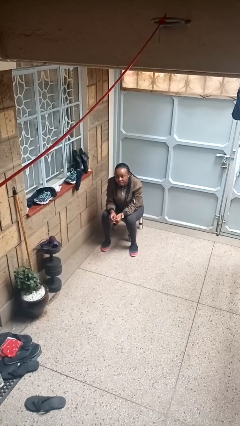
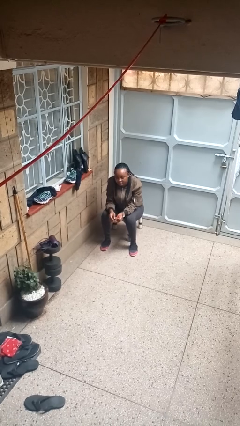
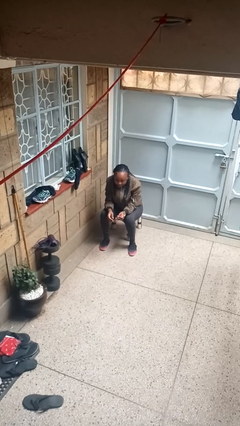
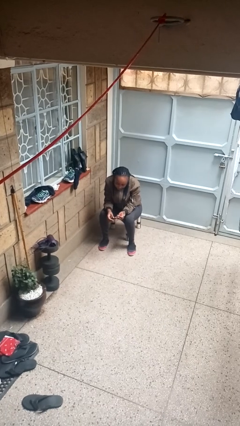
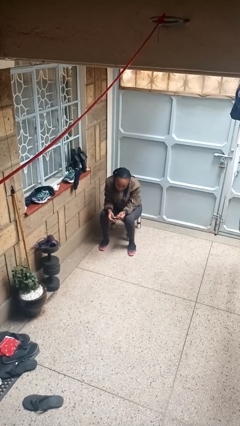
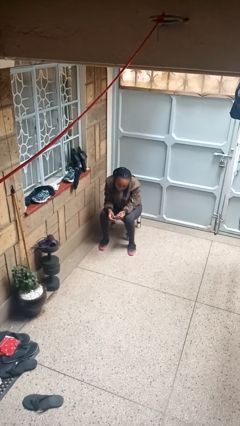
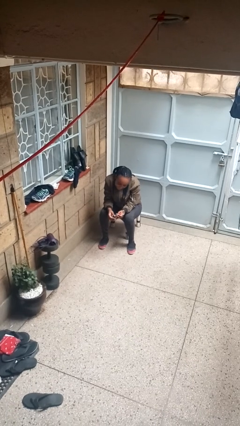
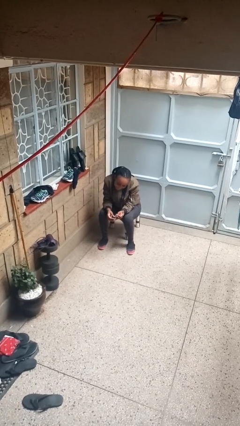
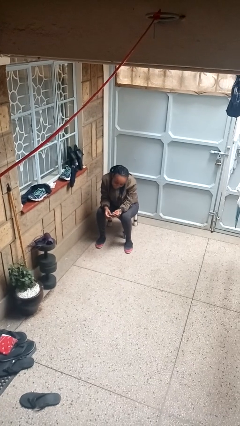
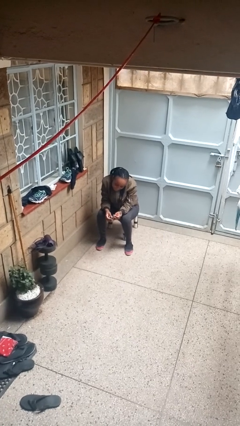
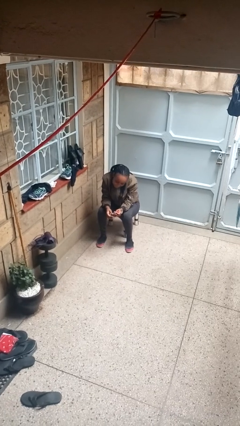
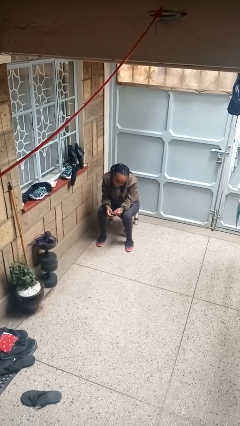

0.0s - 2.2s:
person paints fingernails

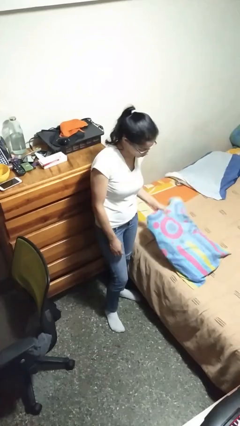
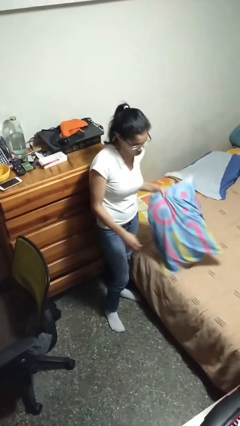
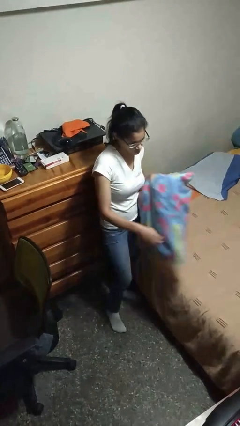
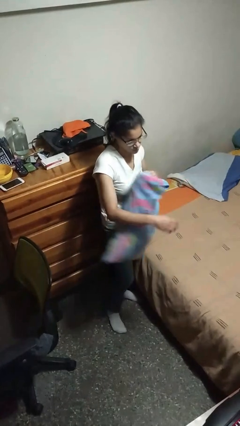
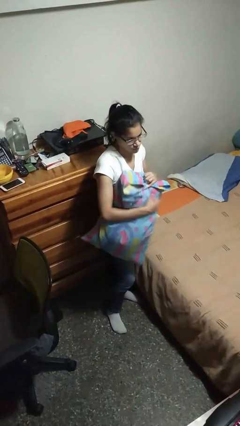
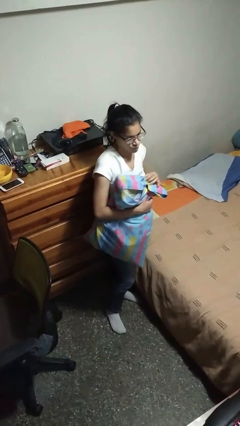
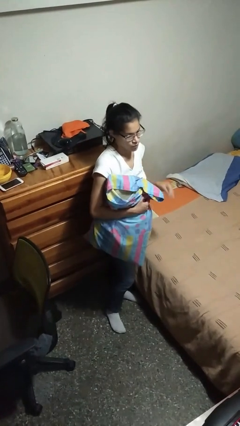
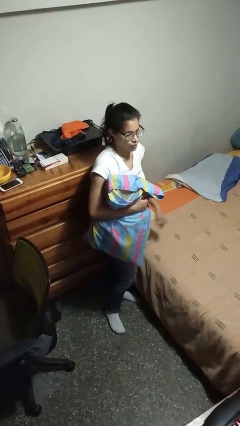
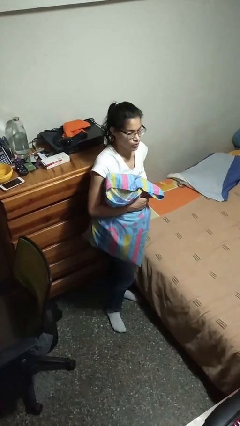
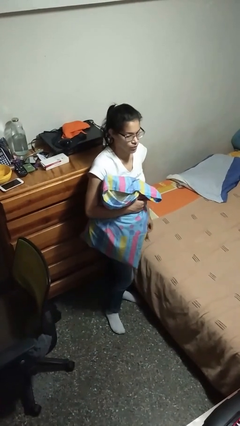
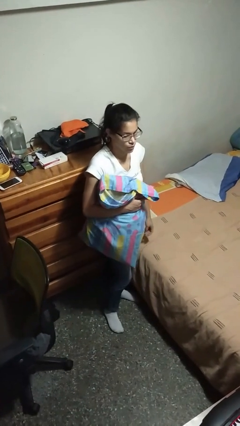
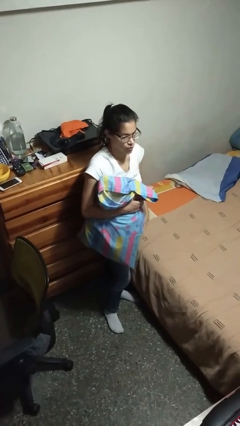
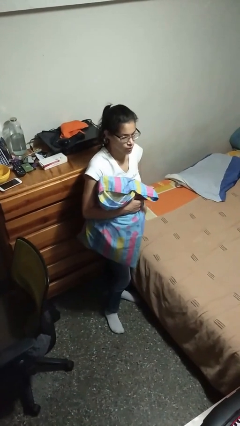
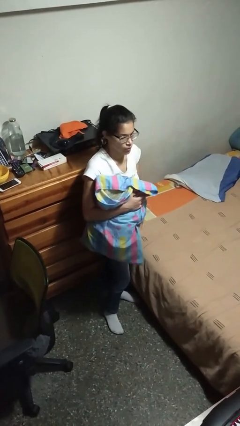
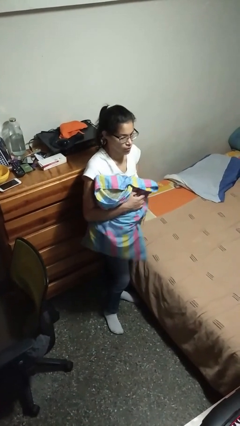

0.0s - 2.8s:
person picks up object from bed

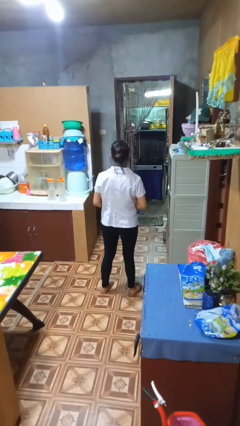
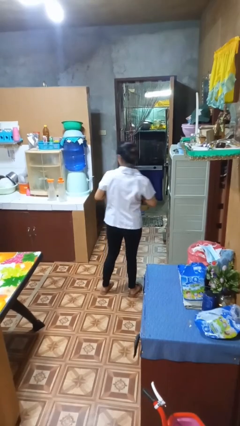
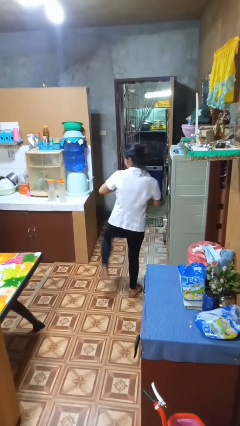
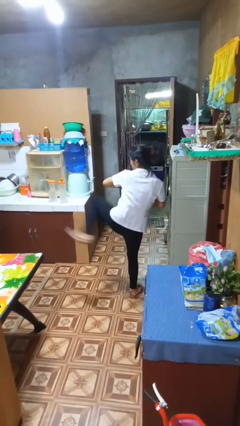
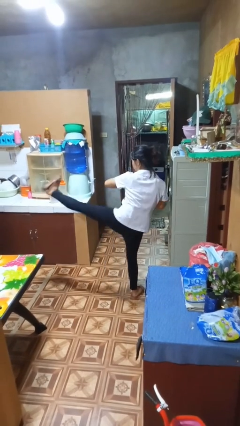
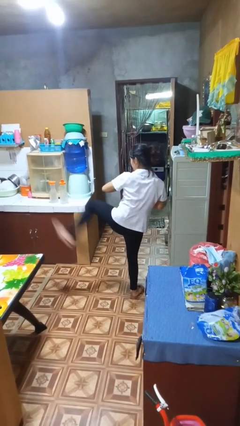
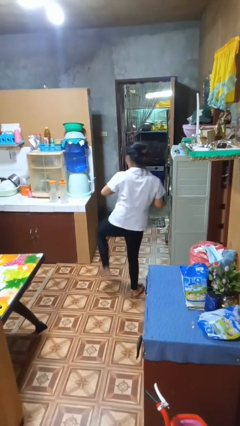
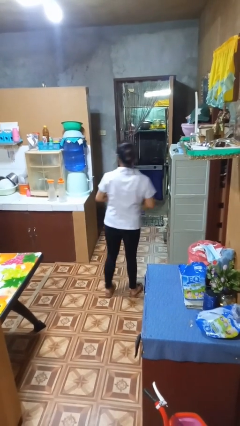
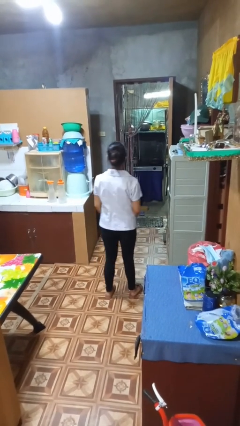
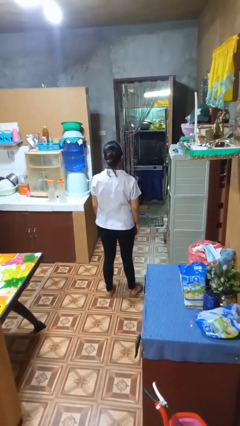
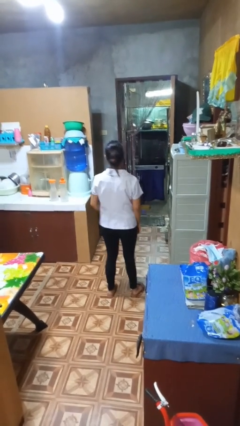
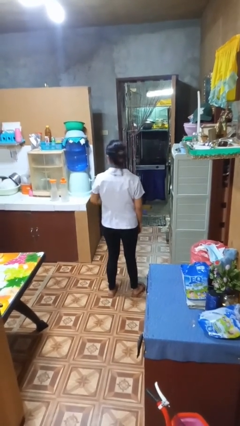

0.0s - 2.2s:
person karate kicks

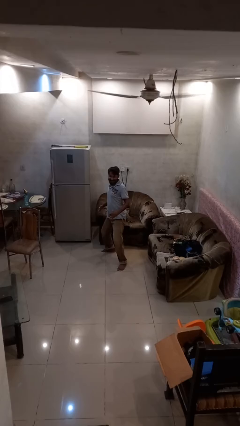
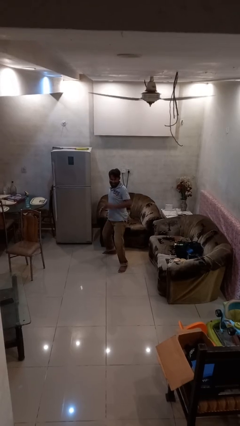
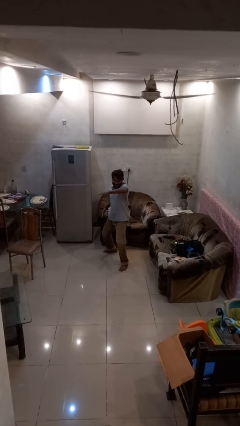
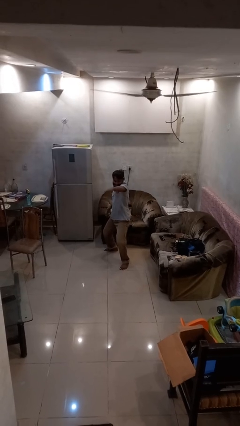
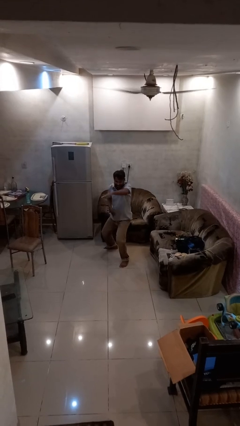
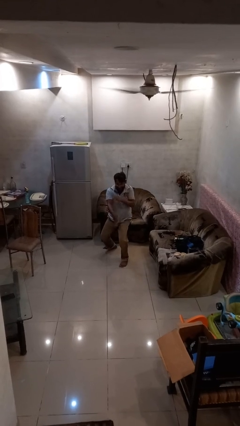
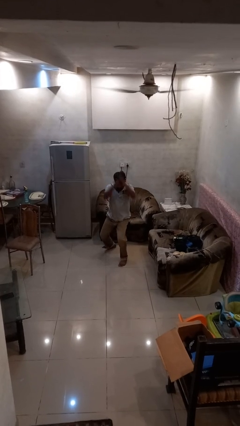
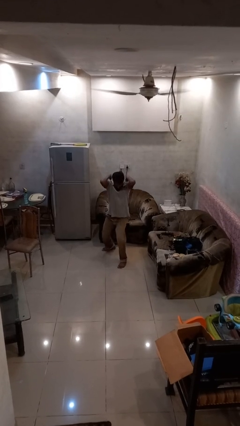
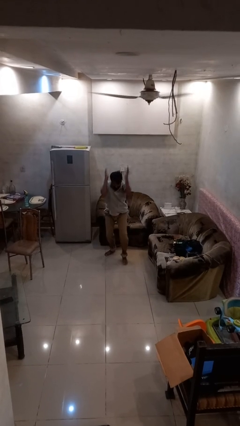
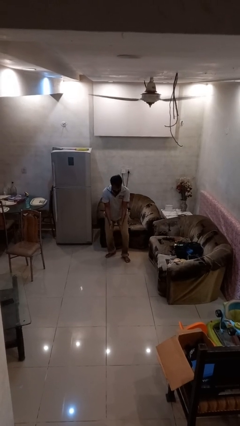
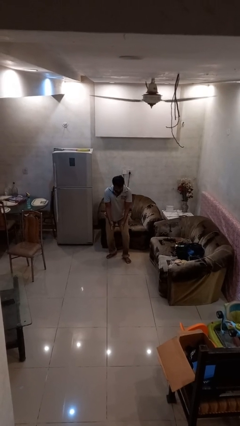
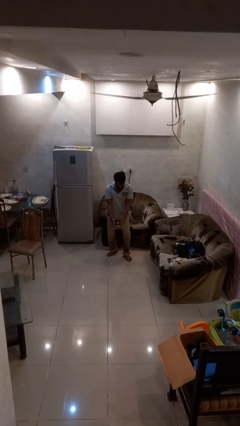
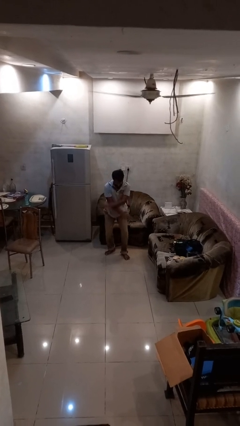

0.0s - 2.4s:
person karate chop

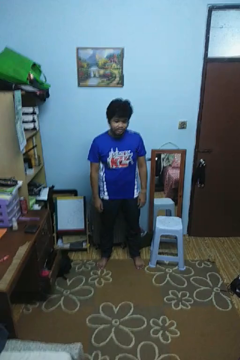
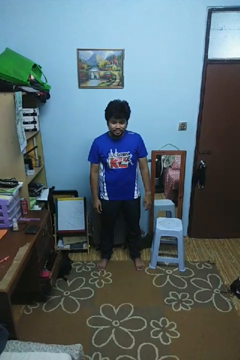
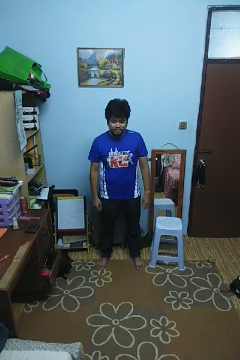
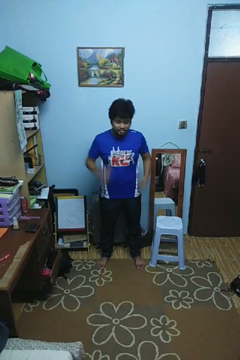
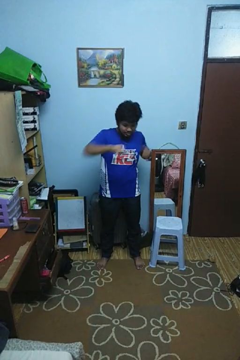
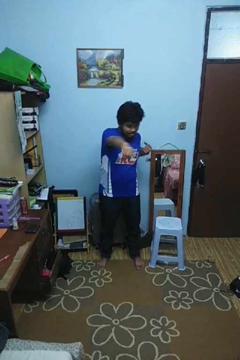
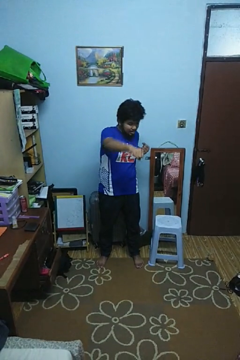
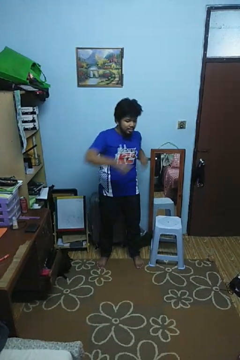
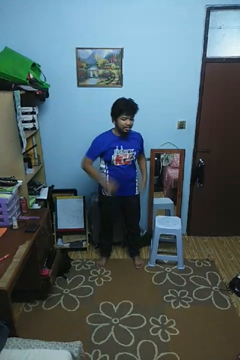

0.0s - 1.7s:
person punches

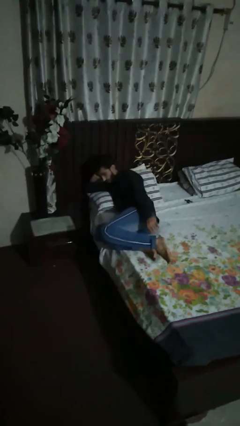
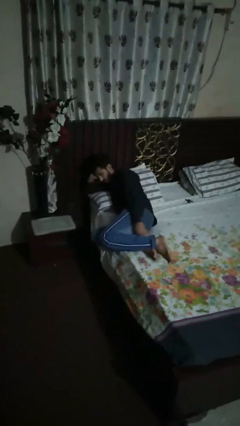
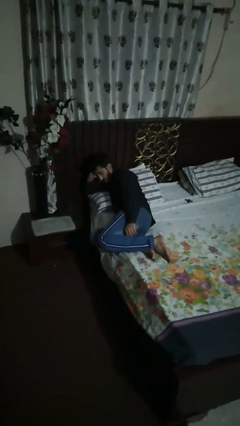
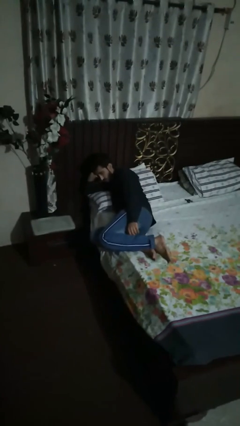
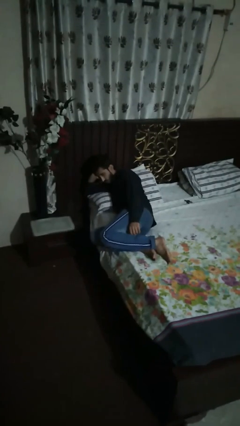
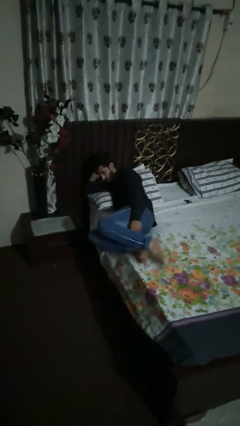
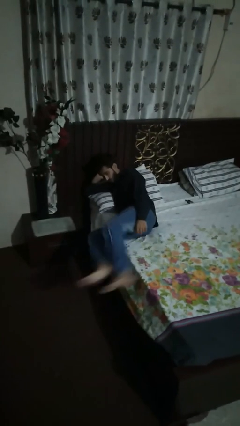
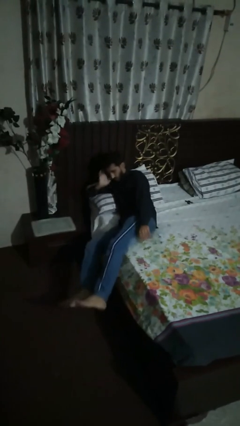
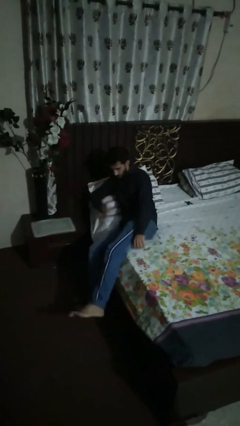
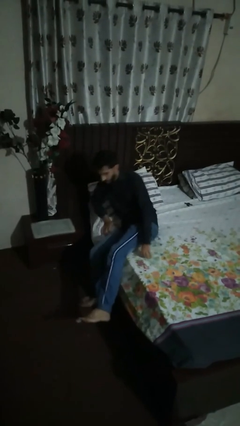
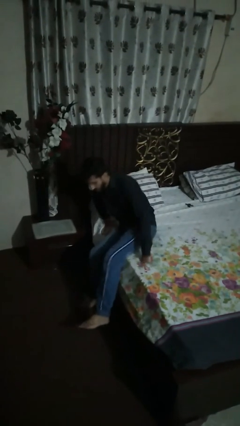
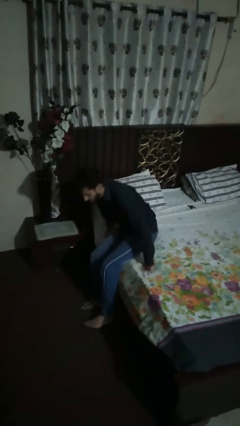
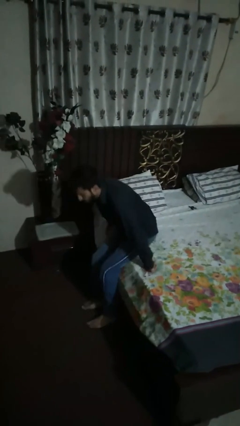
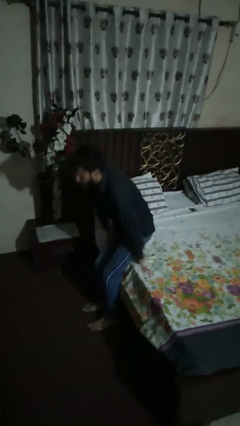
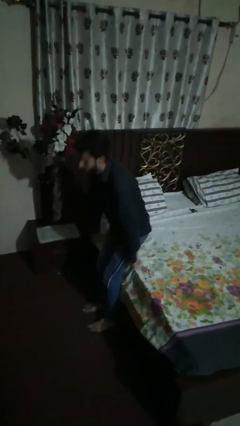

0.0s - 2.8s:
person stands up

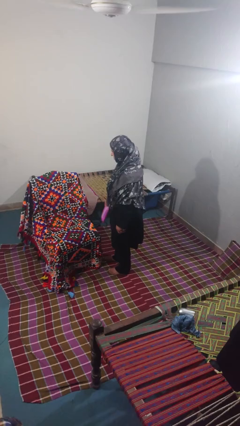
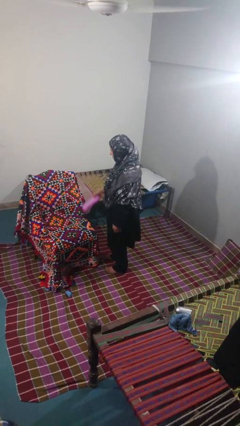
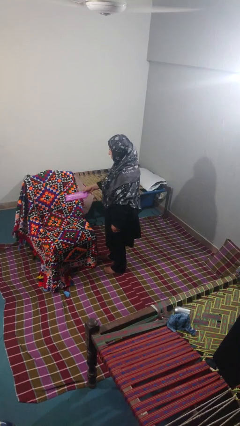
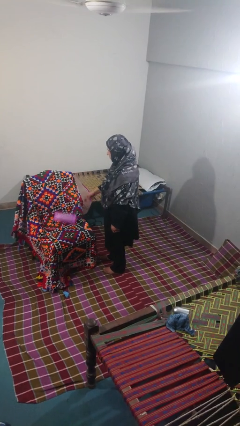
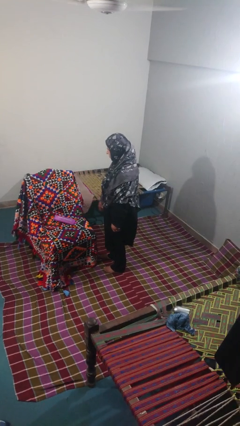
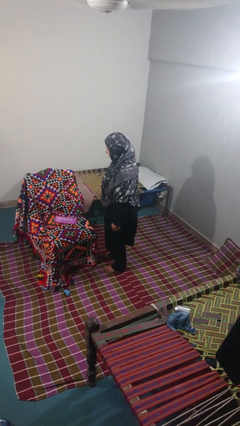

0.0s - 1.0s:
person puts down object on couch

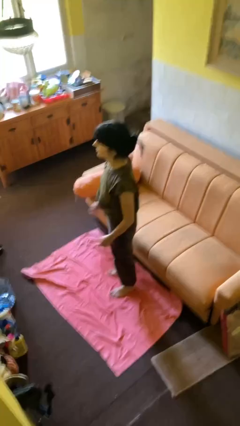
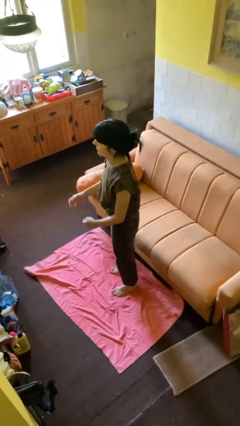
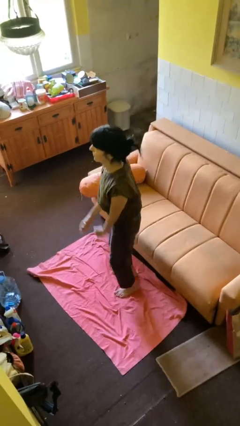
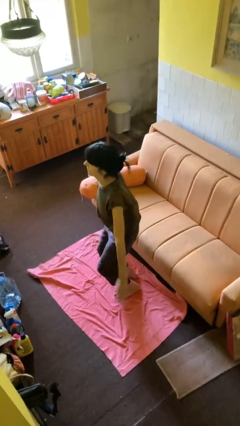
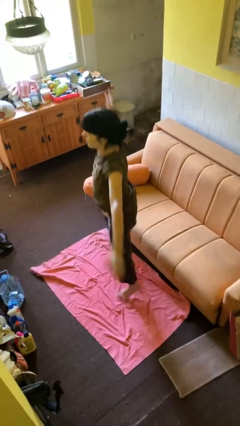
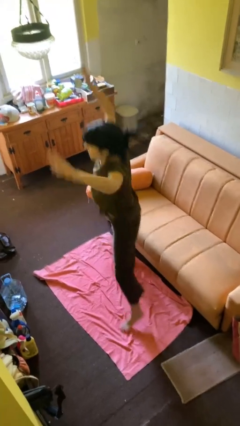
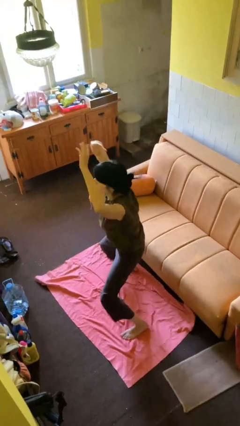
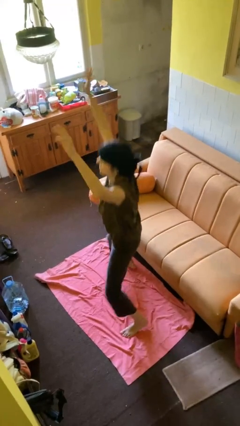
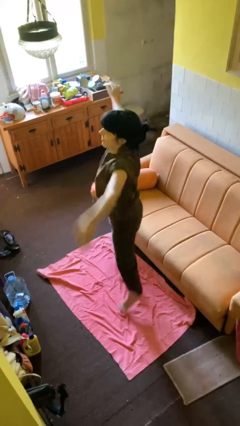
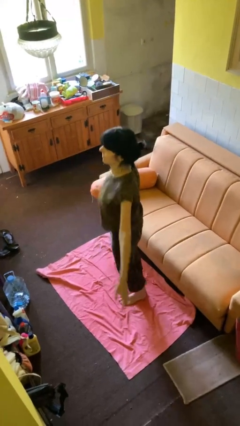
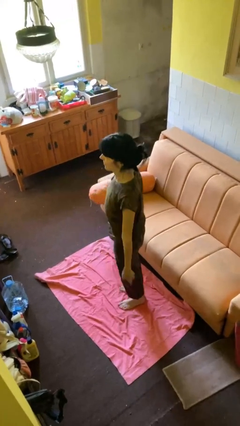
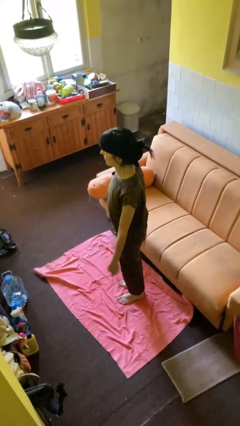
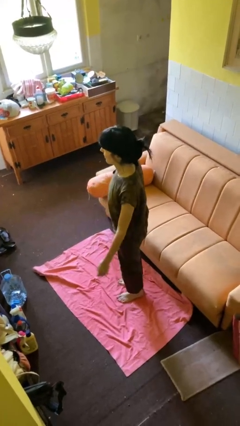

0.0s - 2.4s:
person exercises with jumping jacks
